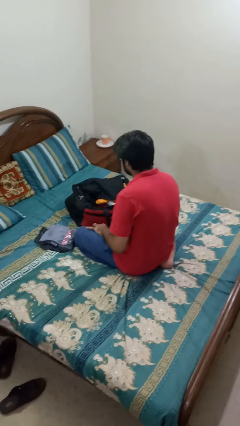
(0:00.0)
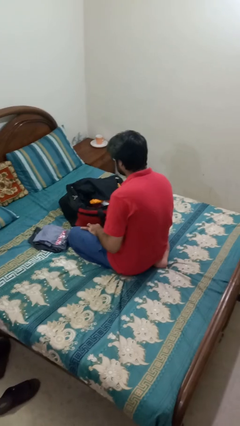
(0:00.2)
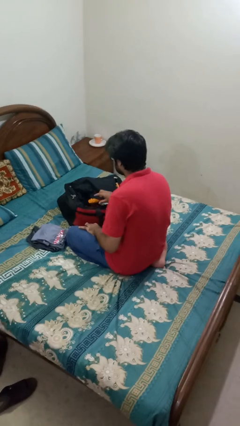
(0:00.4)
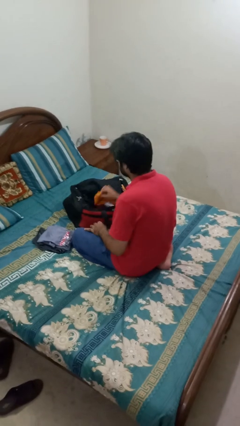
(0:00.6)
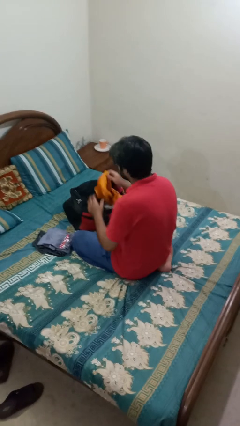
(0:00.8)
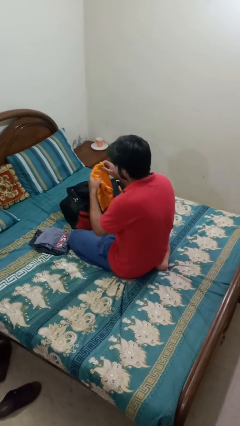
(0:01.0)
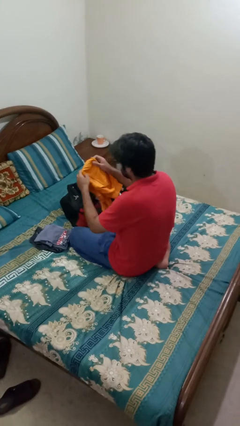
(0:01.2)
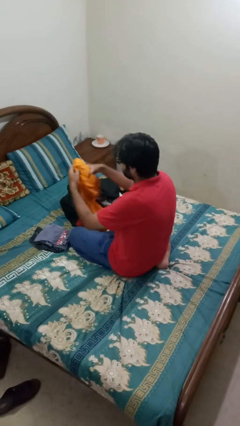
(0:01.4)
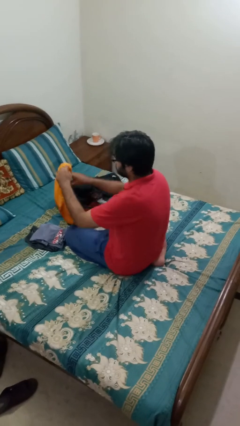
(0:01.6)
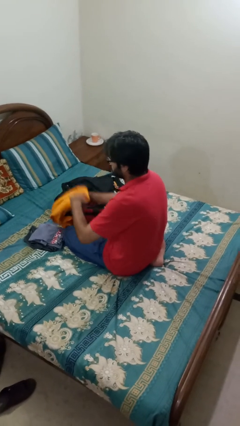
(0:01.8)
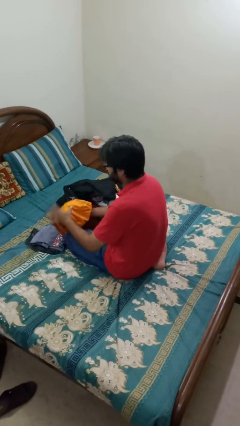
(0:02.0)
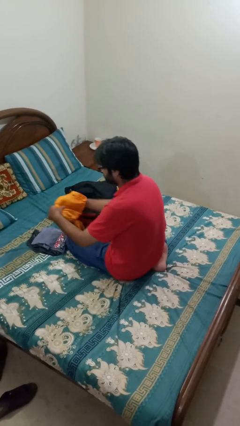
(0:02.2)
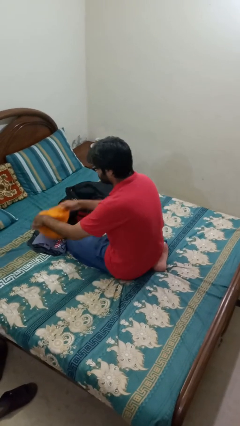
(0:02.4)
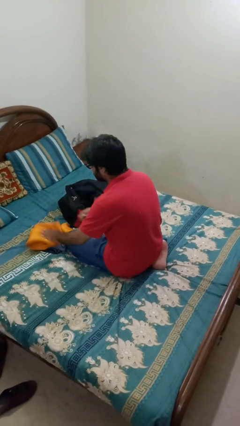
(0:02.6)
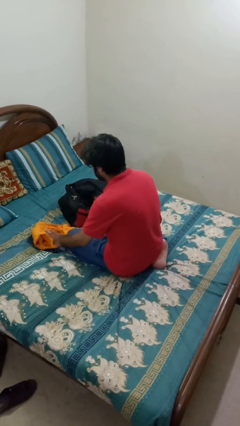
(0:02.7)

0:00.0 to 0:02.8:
person unloads clothes from suitcase

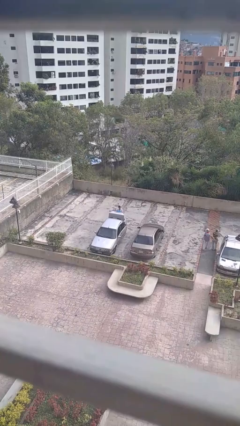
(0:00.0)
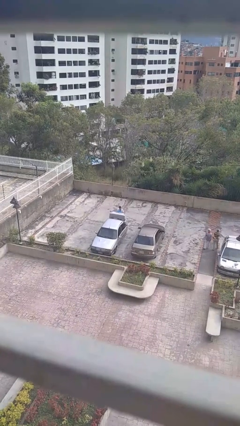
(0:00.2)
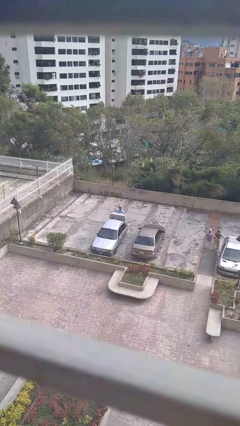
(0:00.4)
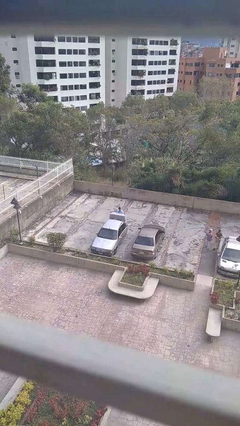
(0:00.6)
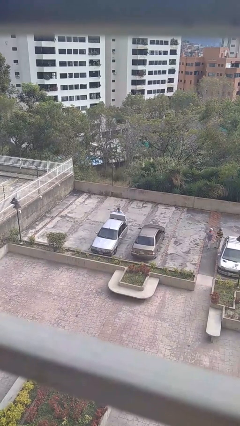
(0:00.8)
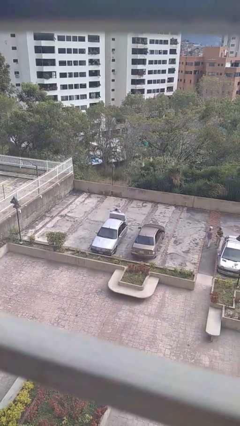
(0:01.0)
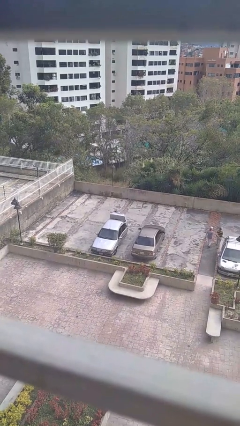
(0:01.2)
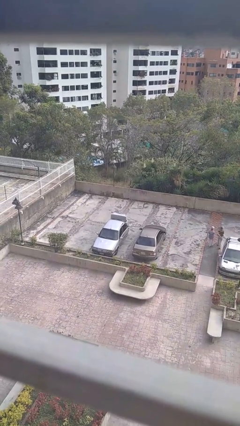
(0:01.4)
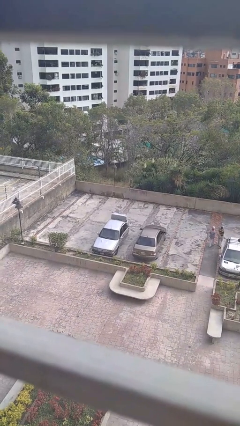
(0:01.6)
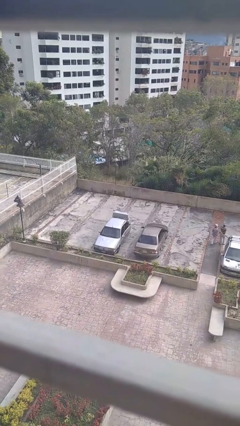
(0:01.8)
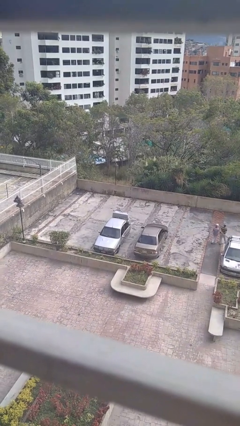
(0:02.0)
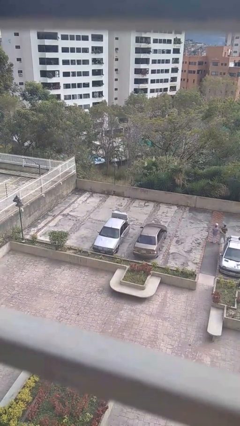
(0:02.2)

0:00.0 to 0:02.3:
person loads car

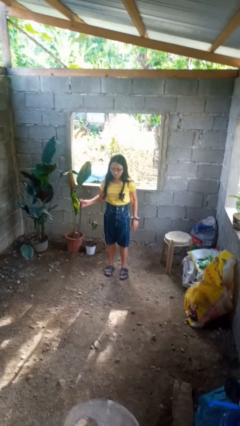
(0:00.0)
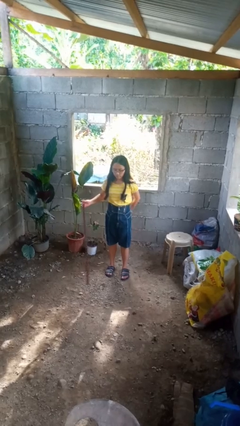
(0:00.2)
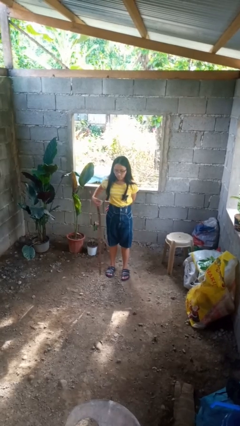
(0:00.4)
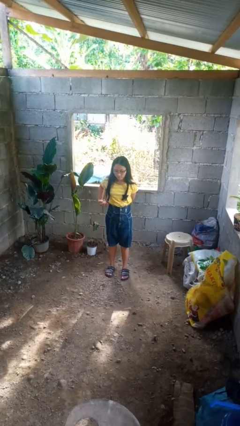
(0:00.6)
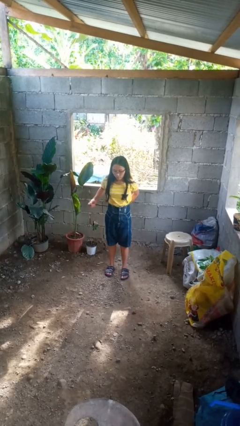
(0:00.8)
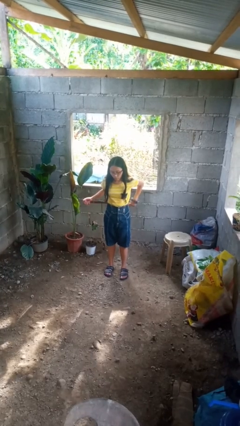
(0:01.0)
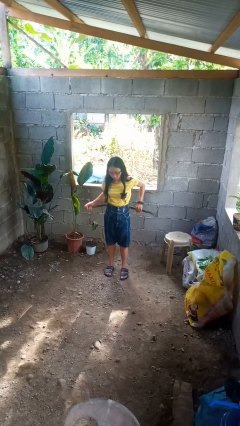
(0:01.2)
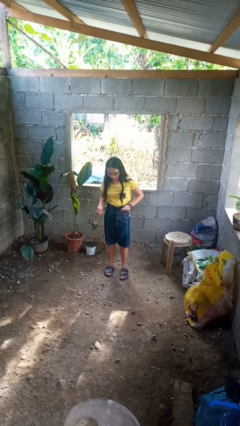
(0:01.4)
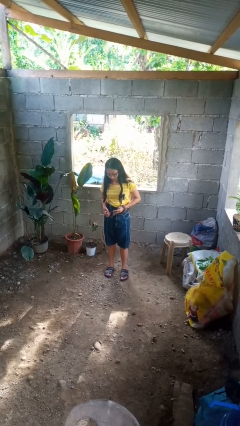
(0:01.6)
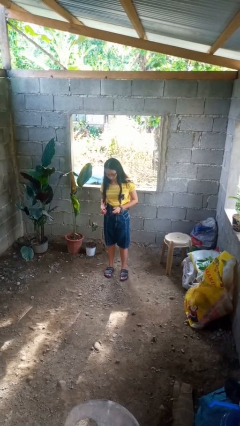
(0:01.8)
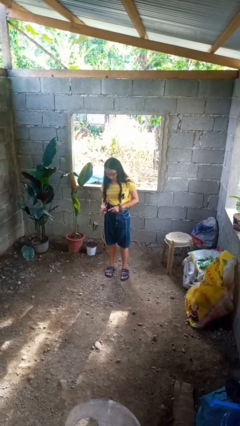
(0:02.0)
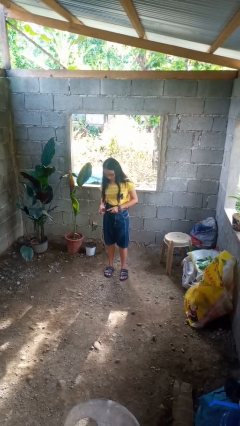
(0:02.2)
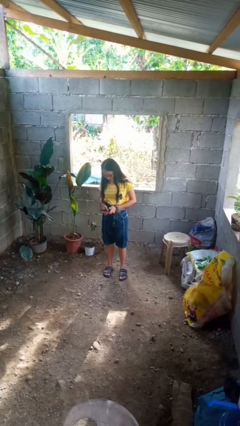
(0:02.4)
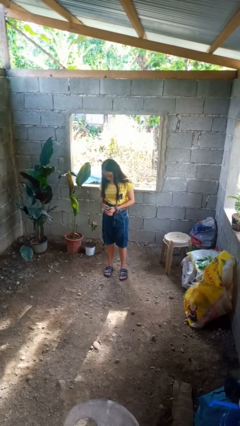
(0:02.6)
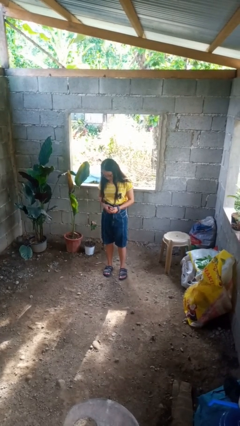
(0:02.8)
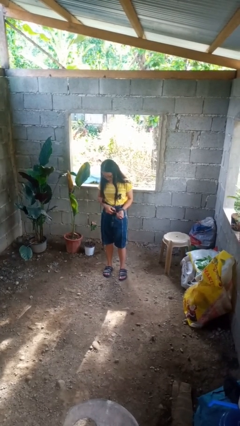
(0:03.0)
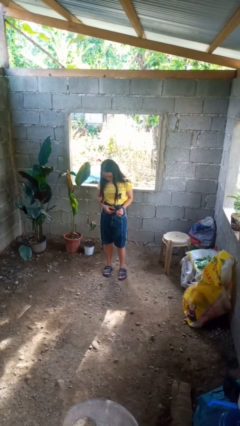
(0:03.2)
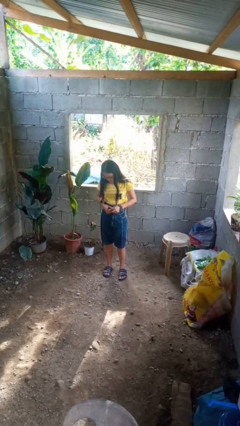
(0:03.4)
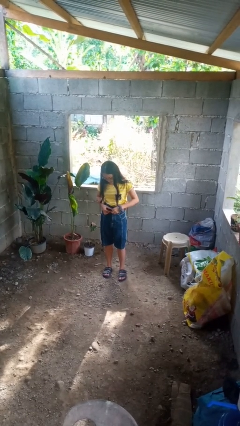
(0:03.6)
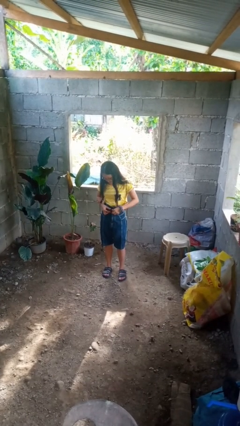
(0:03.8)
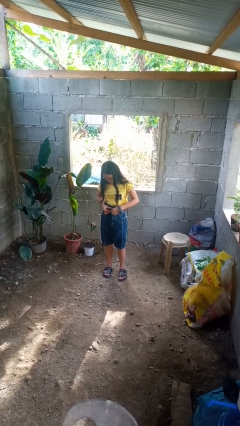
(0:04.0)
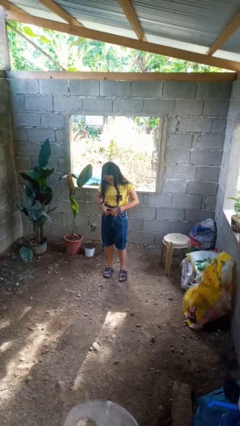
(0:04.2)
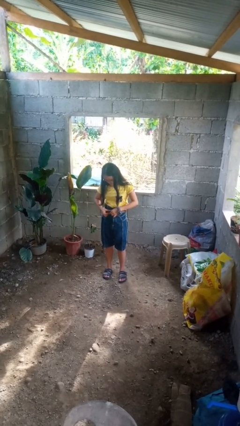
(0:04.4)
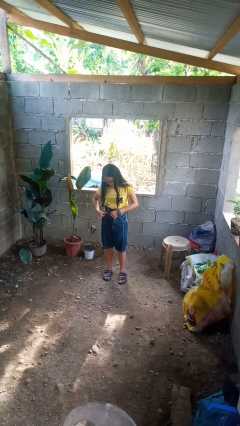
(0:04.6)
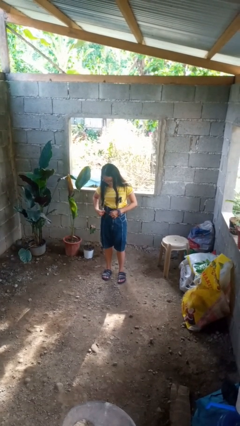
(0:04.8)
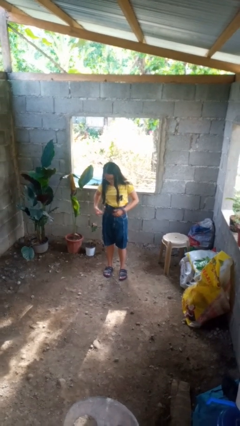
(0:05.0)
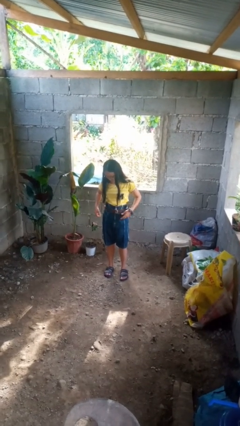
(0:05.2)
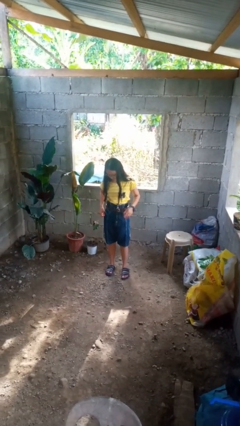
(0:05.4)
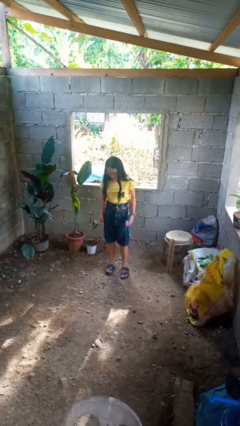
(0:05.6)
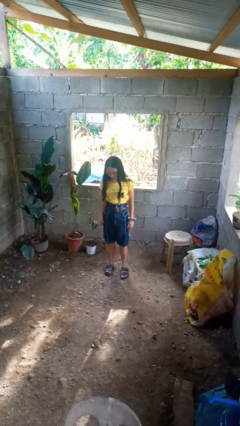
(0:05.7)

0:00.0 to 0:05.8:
person puts on belt

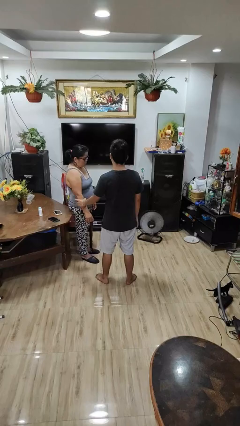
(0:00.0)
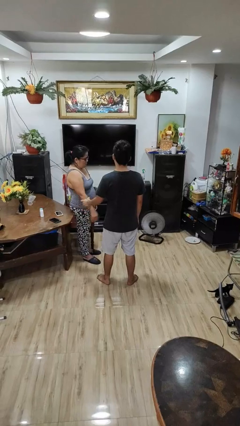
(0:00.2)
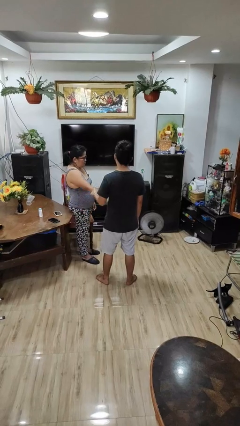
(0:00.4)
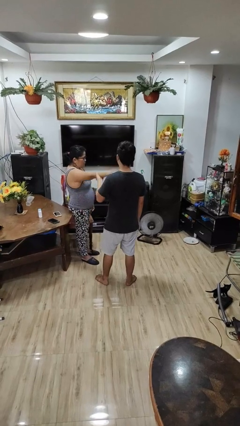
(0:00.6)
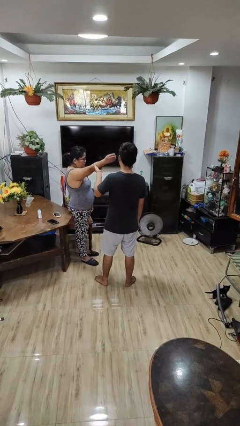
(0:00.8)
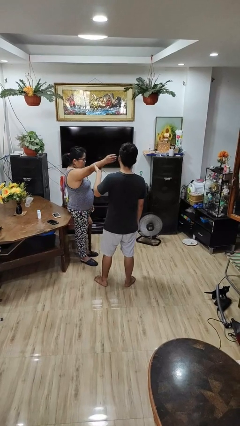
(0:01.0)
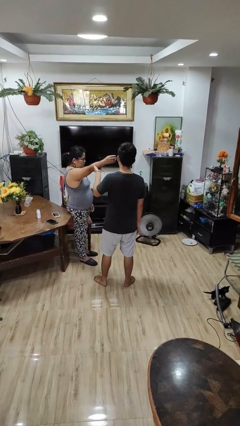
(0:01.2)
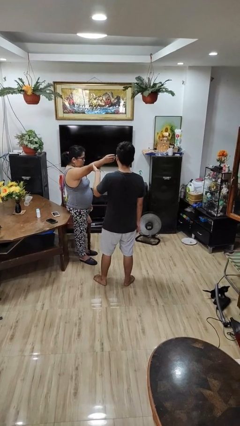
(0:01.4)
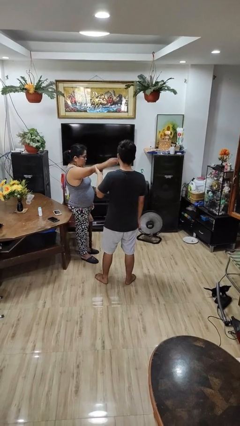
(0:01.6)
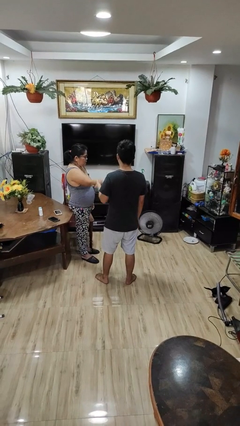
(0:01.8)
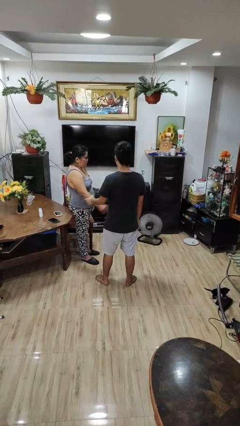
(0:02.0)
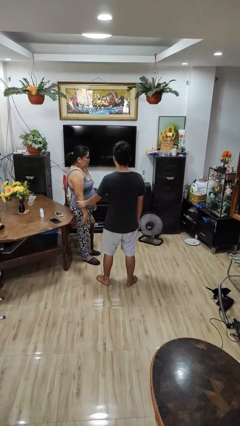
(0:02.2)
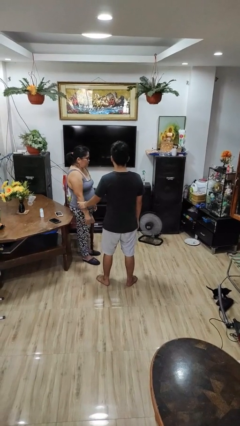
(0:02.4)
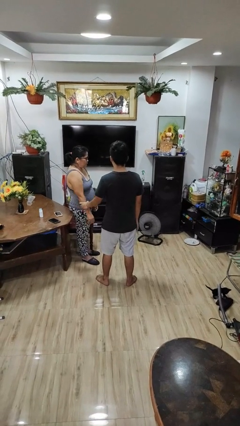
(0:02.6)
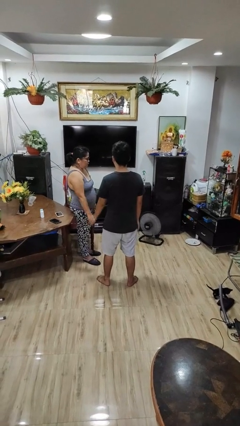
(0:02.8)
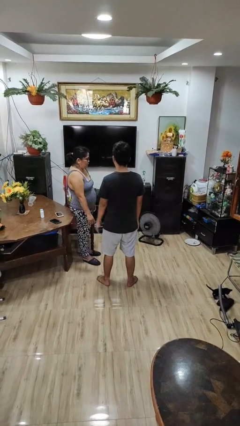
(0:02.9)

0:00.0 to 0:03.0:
person grabs person by forearm

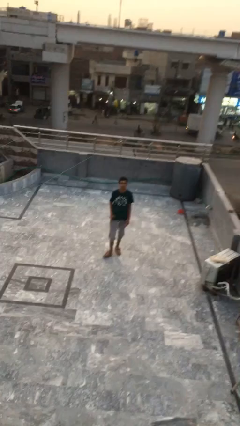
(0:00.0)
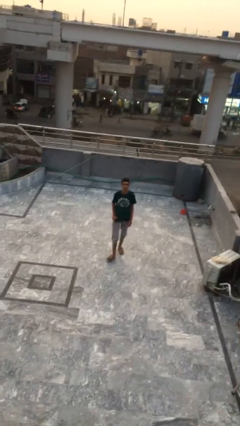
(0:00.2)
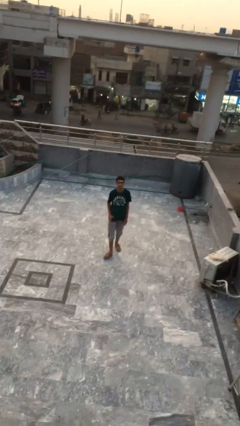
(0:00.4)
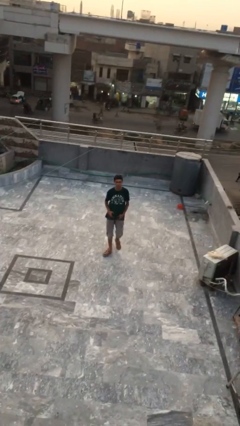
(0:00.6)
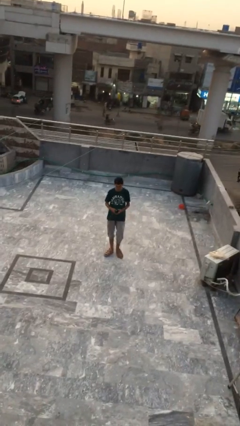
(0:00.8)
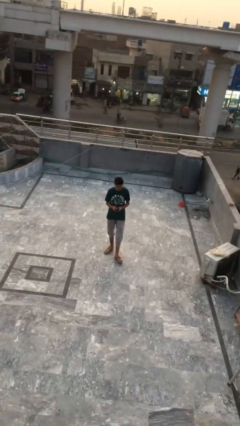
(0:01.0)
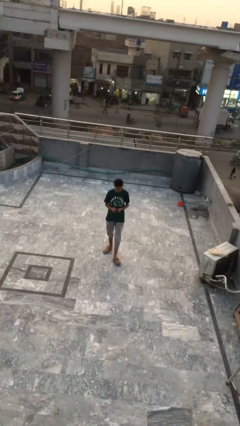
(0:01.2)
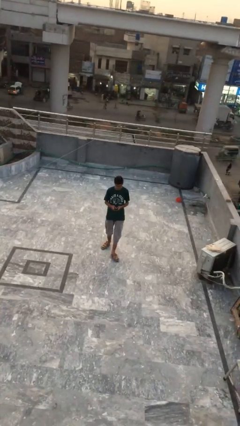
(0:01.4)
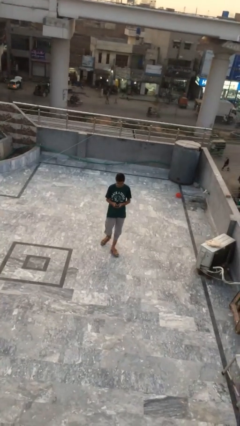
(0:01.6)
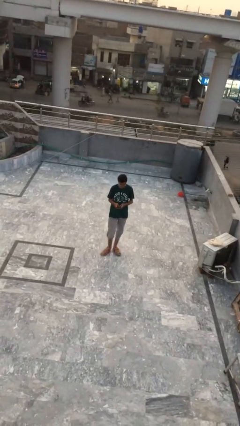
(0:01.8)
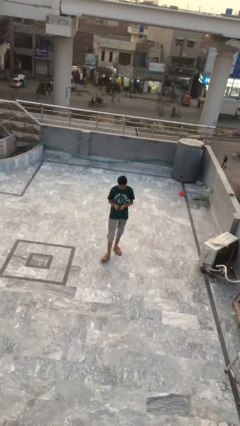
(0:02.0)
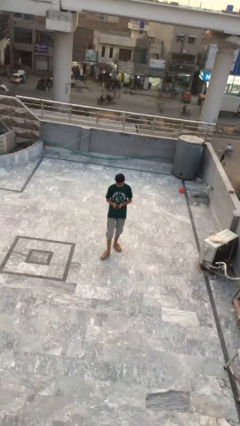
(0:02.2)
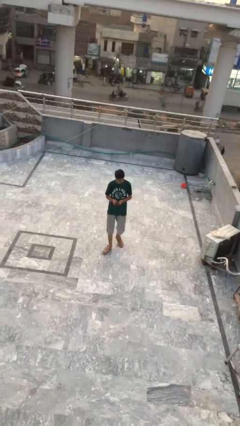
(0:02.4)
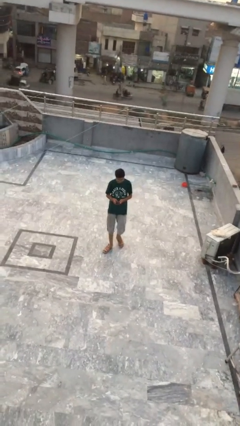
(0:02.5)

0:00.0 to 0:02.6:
person texts on phone

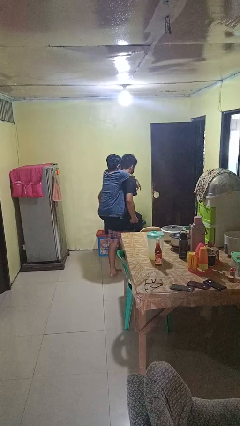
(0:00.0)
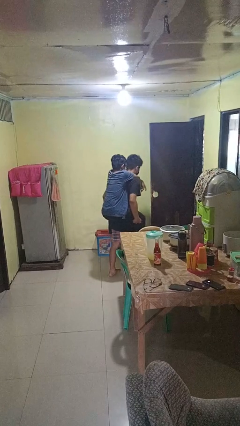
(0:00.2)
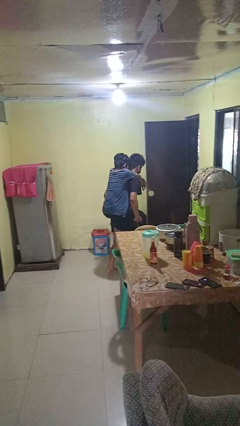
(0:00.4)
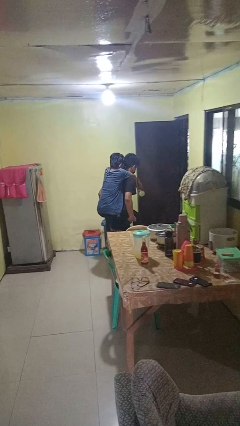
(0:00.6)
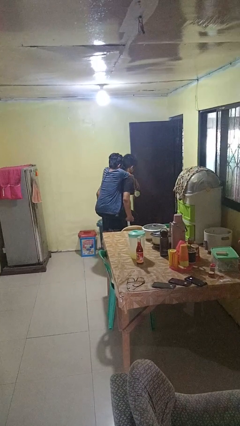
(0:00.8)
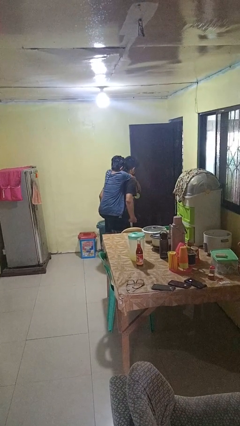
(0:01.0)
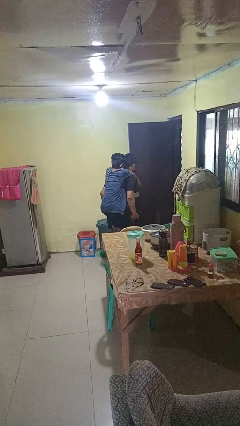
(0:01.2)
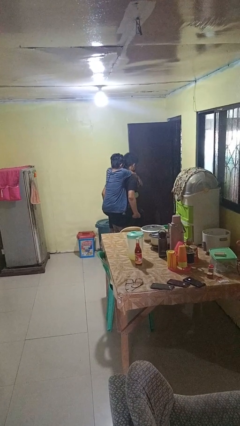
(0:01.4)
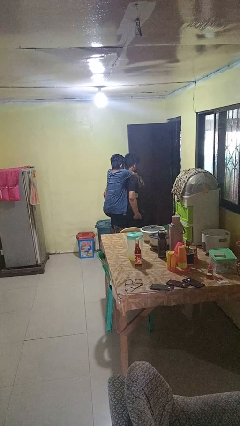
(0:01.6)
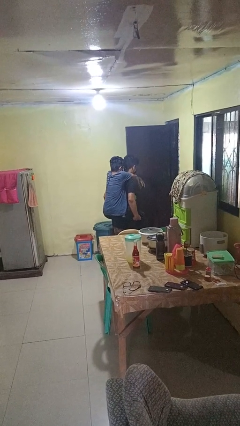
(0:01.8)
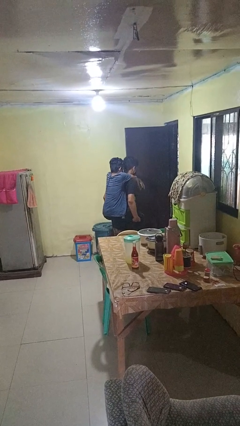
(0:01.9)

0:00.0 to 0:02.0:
person carries person on back
